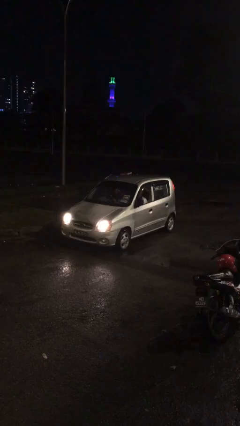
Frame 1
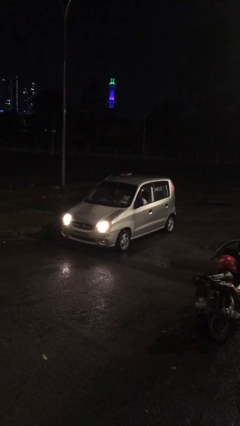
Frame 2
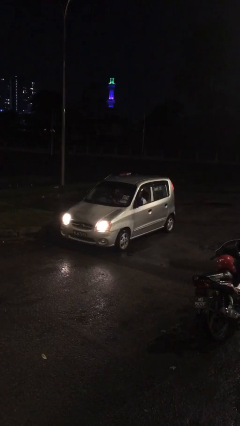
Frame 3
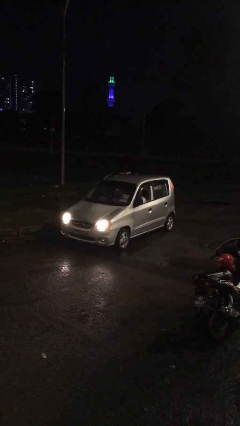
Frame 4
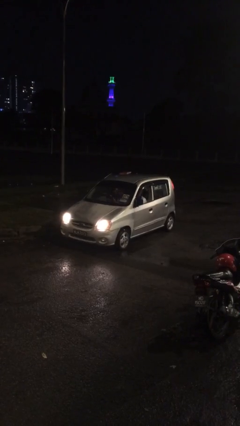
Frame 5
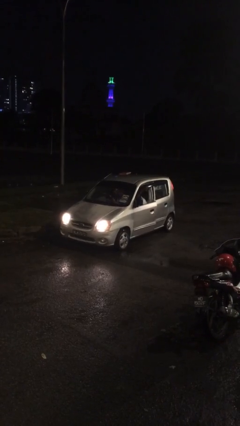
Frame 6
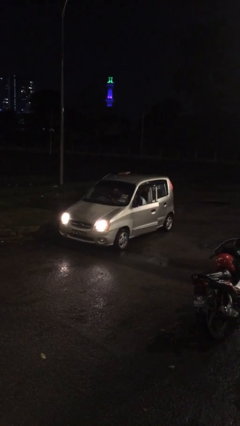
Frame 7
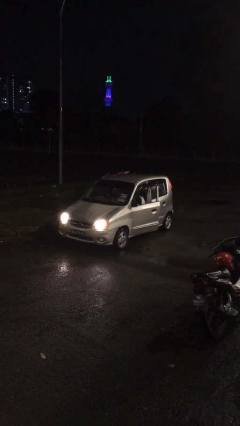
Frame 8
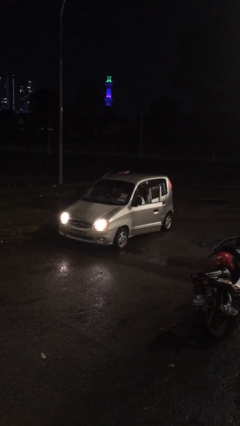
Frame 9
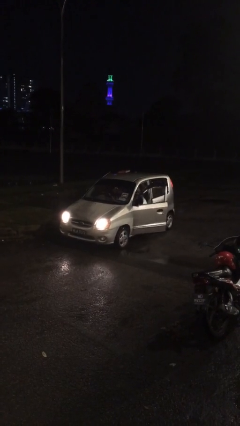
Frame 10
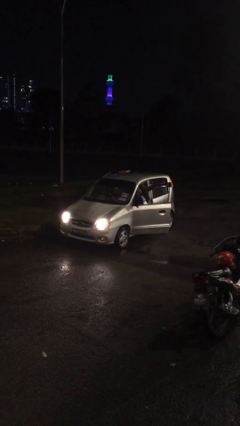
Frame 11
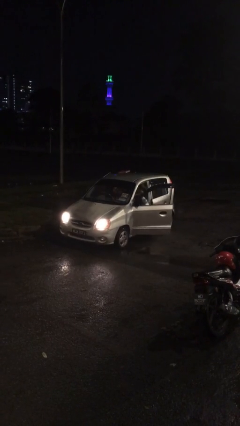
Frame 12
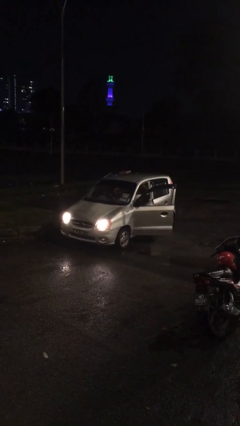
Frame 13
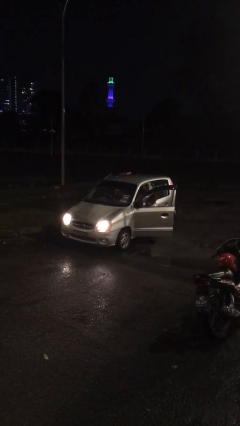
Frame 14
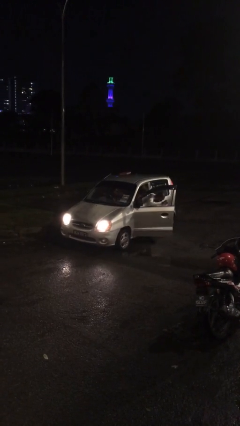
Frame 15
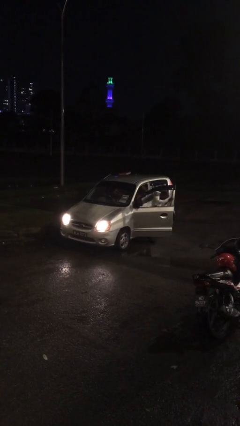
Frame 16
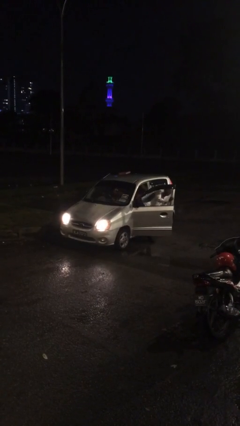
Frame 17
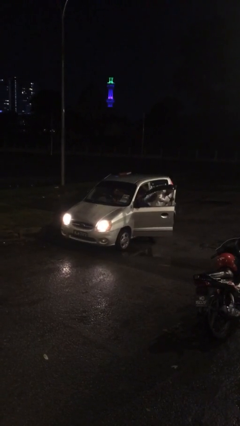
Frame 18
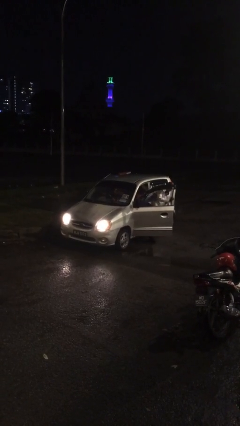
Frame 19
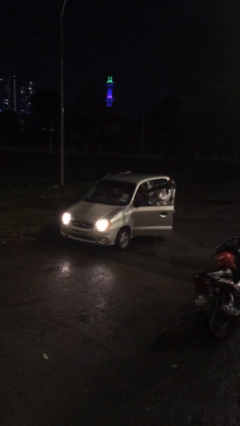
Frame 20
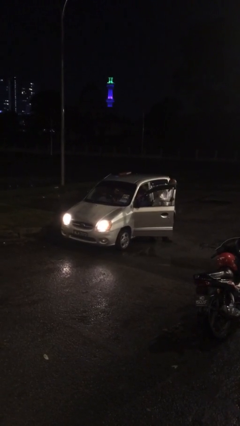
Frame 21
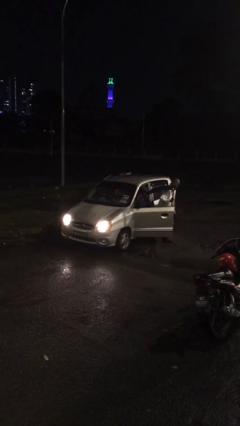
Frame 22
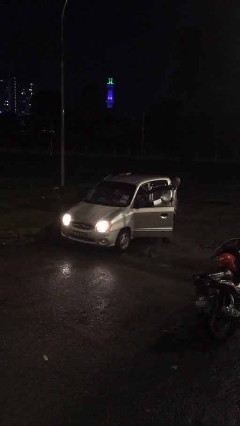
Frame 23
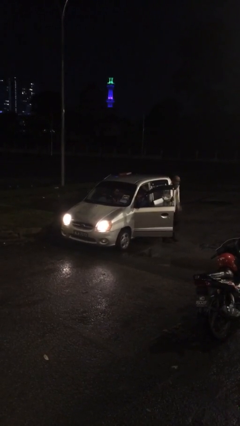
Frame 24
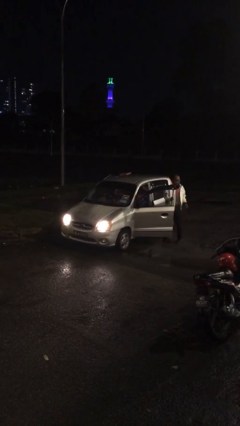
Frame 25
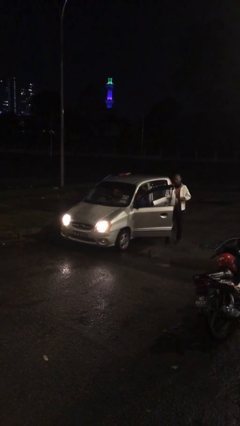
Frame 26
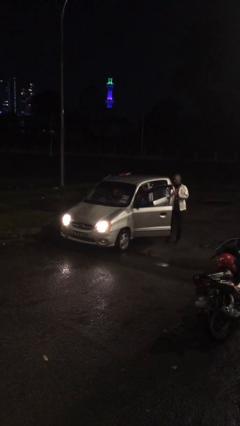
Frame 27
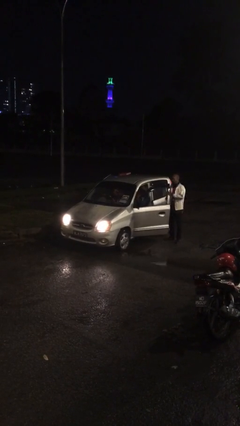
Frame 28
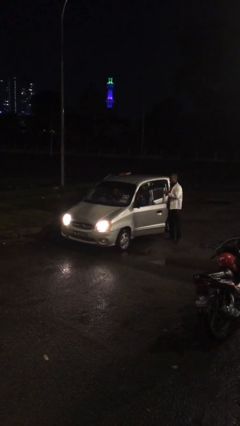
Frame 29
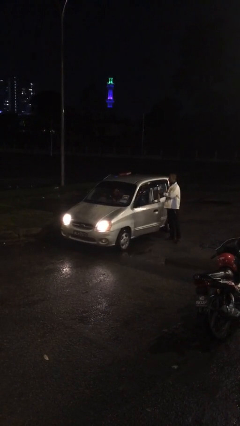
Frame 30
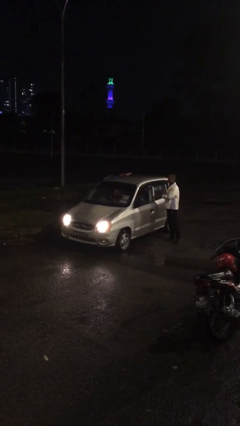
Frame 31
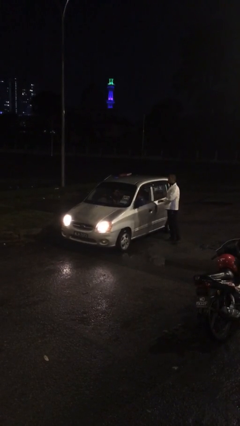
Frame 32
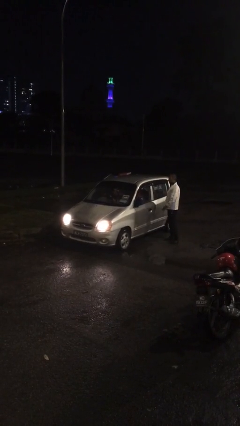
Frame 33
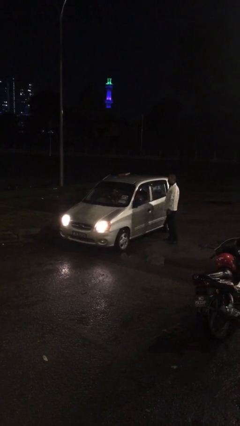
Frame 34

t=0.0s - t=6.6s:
car drops off person

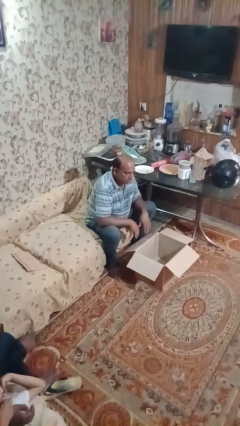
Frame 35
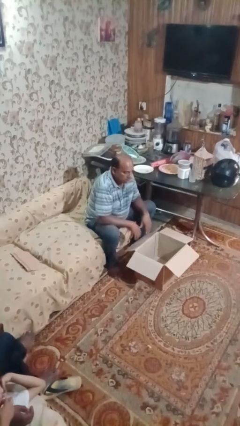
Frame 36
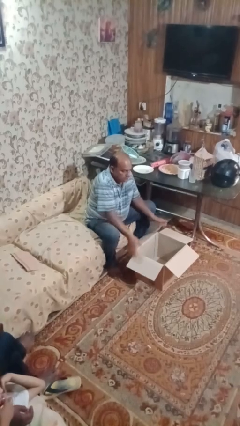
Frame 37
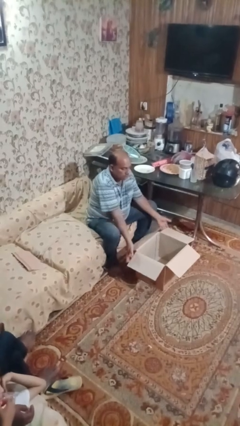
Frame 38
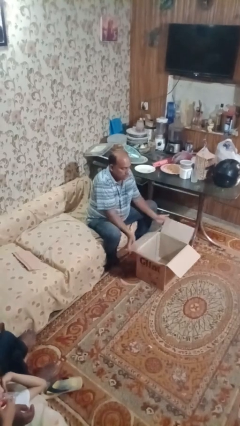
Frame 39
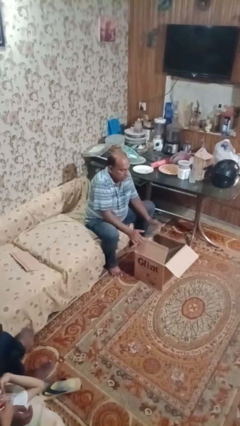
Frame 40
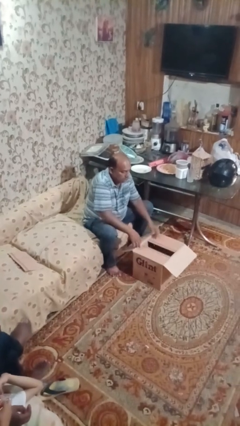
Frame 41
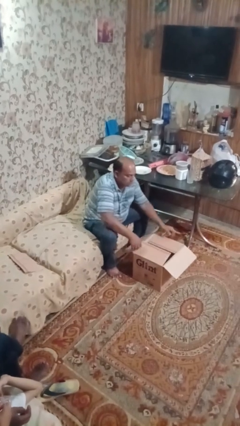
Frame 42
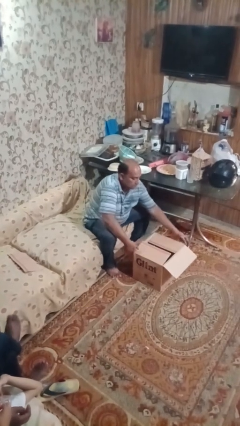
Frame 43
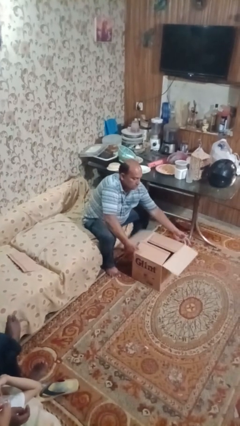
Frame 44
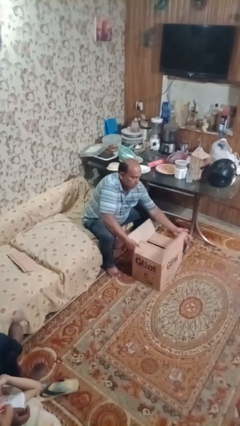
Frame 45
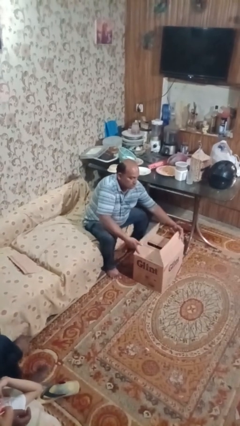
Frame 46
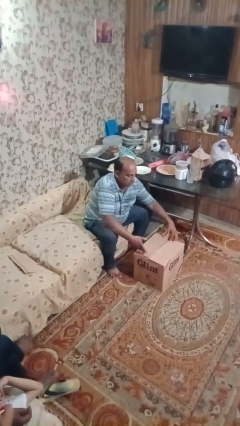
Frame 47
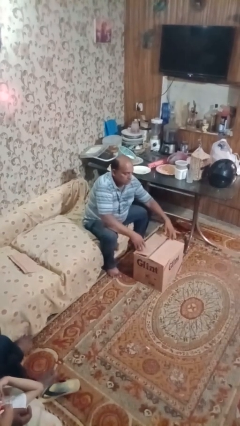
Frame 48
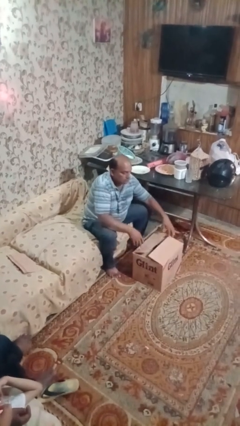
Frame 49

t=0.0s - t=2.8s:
person closes box

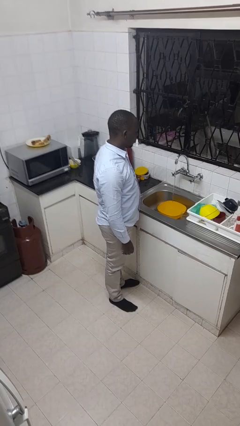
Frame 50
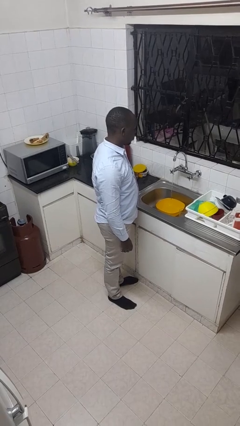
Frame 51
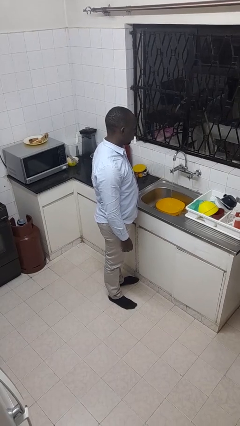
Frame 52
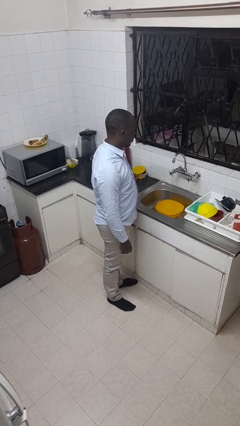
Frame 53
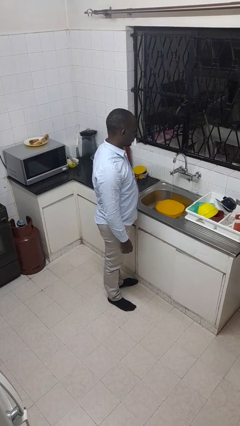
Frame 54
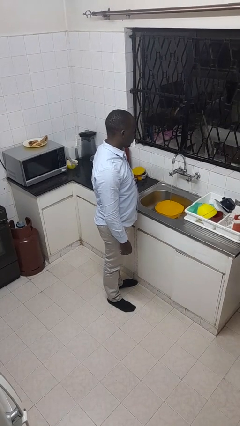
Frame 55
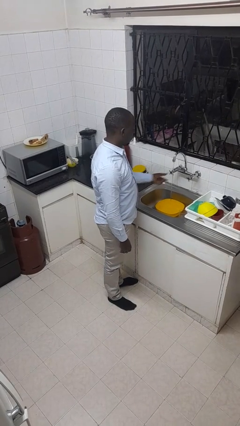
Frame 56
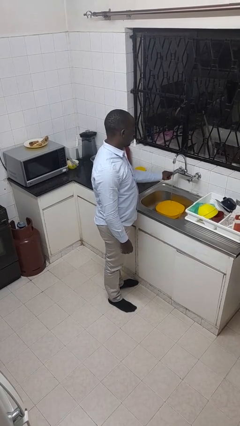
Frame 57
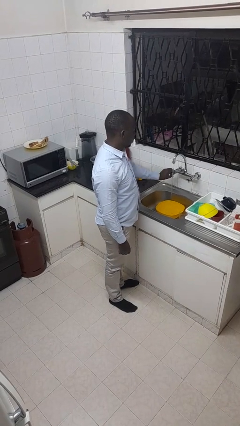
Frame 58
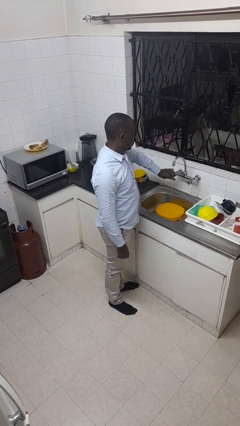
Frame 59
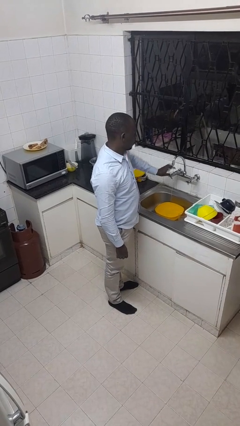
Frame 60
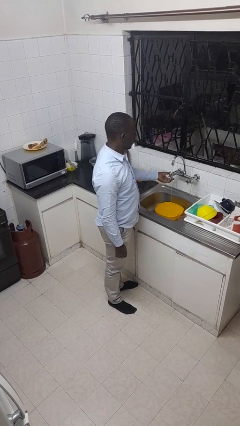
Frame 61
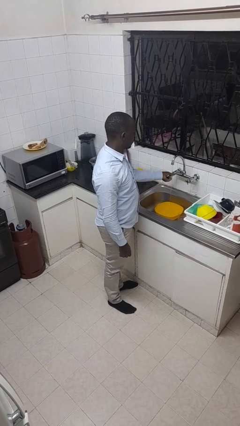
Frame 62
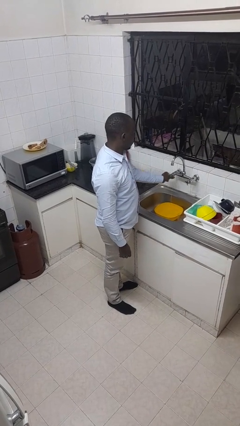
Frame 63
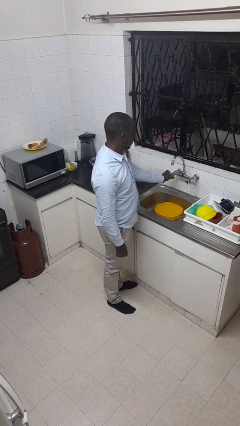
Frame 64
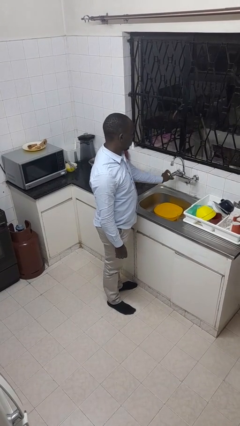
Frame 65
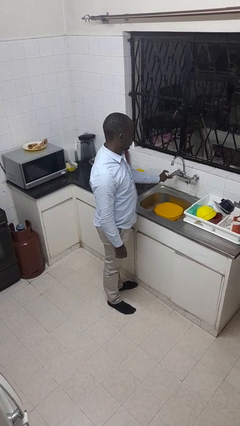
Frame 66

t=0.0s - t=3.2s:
person turns off faucet

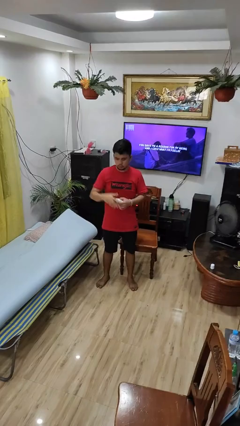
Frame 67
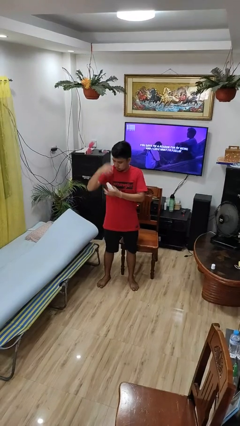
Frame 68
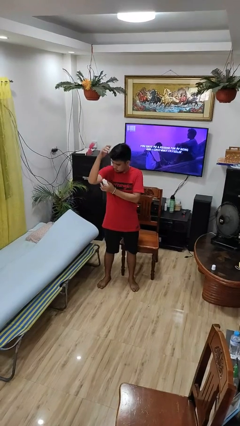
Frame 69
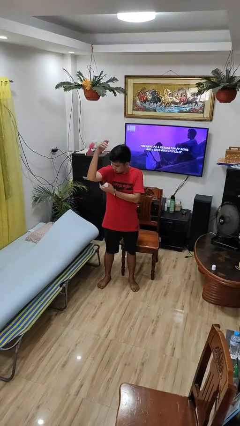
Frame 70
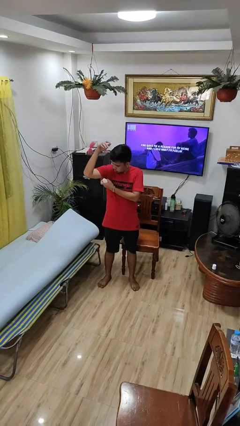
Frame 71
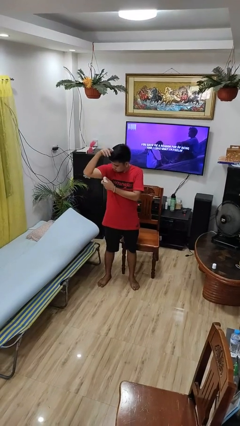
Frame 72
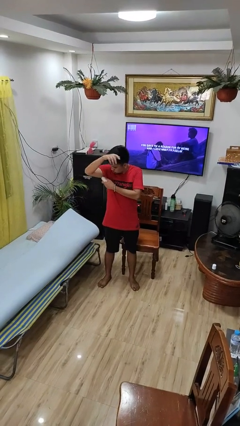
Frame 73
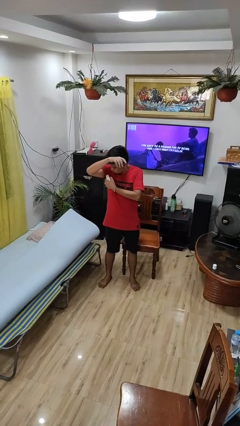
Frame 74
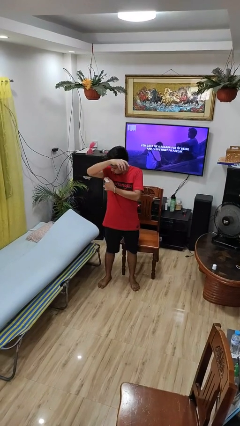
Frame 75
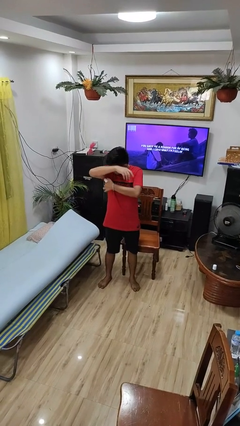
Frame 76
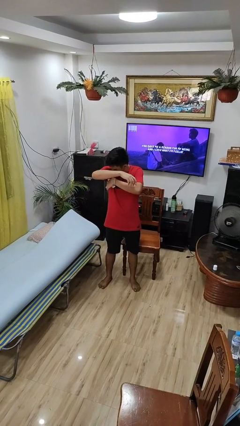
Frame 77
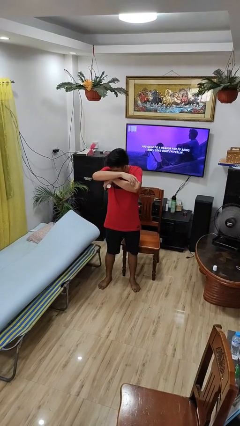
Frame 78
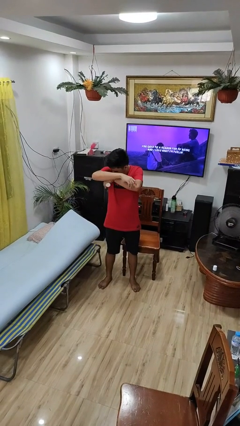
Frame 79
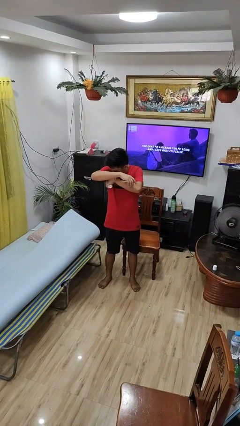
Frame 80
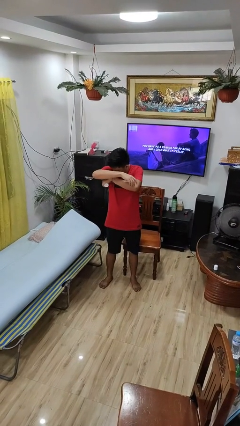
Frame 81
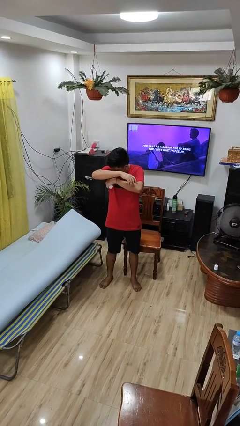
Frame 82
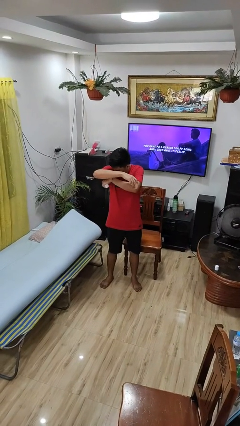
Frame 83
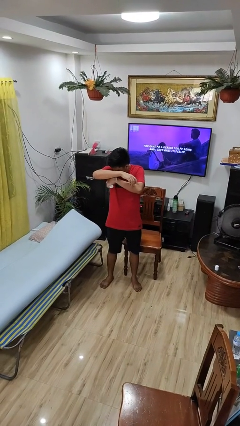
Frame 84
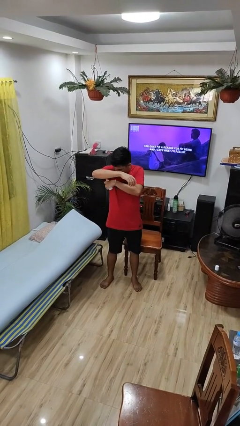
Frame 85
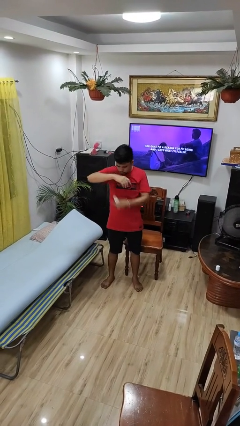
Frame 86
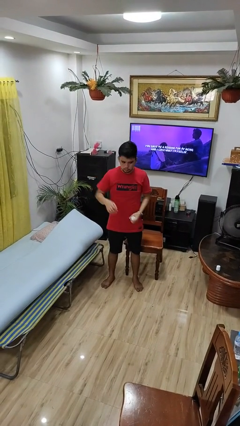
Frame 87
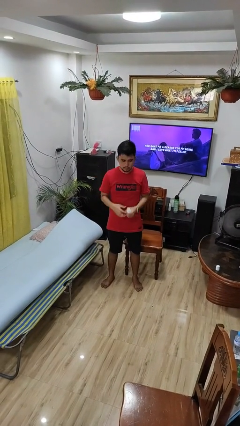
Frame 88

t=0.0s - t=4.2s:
person applies deodorant

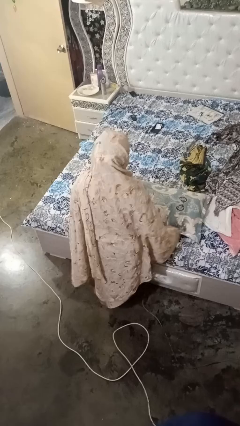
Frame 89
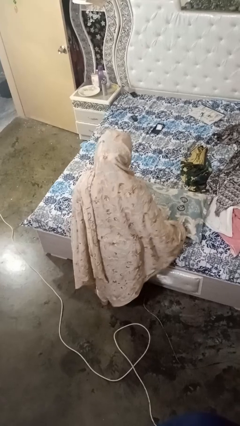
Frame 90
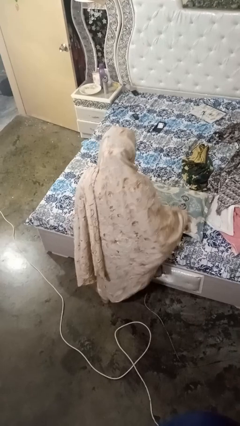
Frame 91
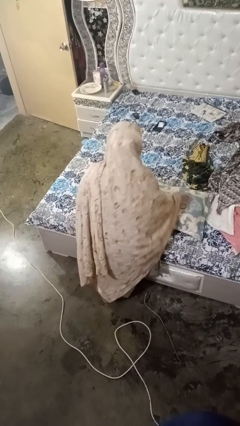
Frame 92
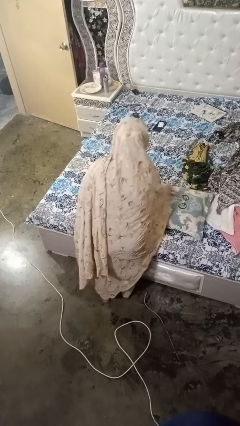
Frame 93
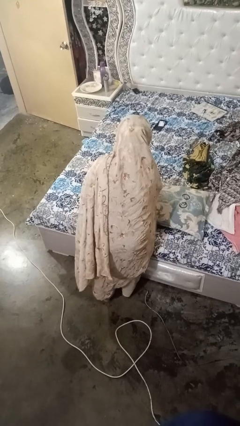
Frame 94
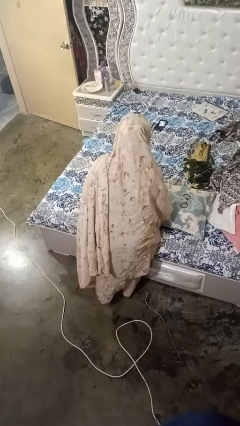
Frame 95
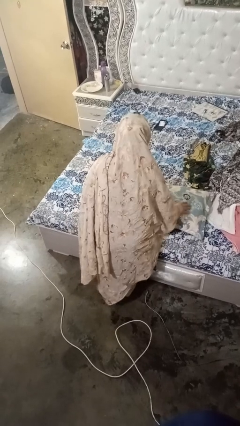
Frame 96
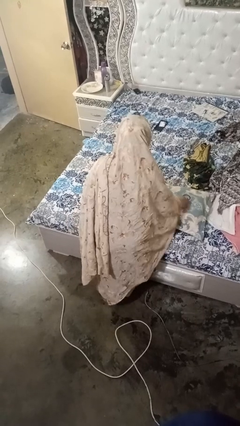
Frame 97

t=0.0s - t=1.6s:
person waves hand over object
